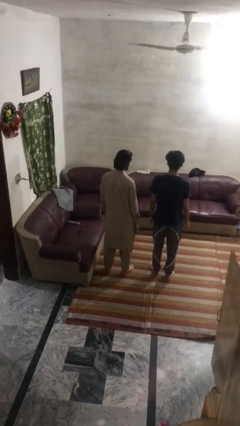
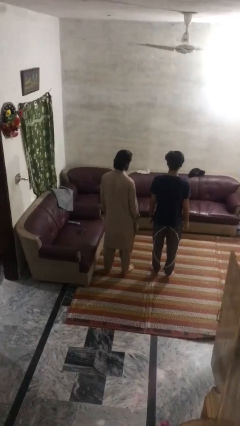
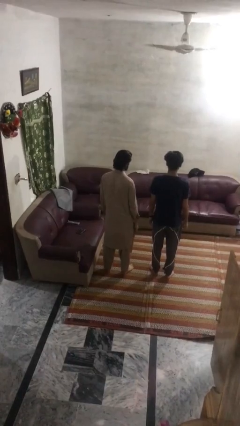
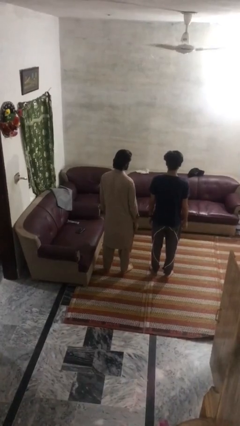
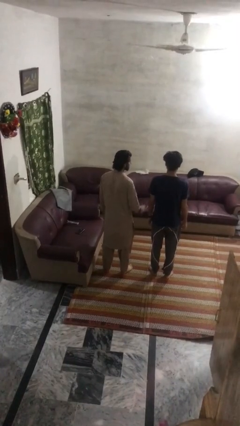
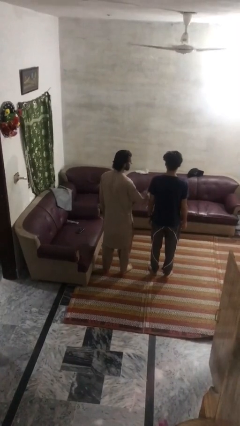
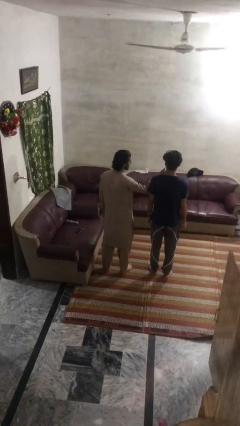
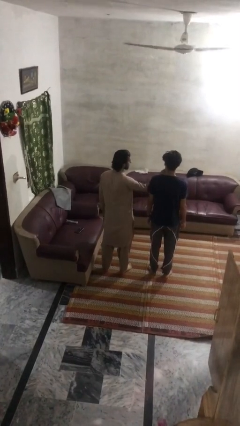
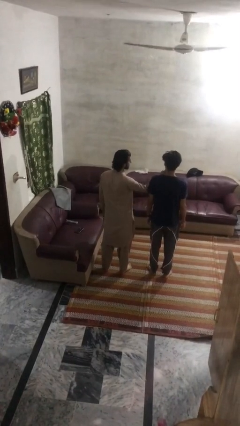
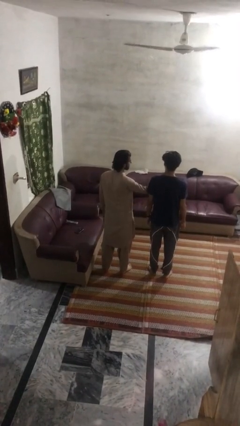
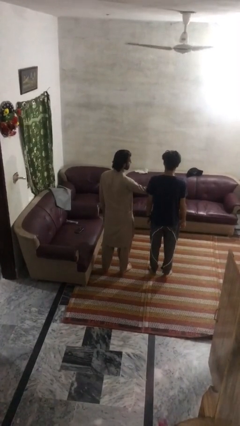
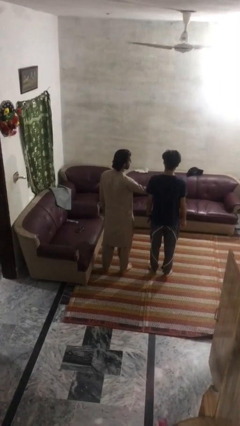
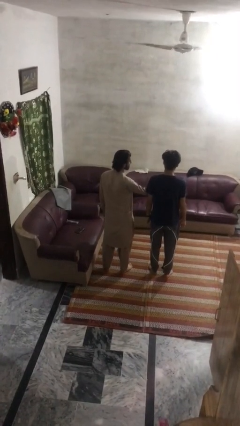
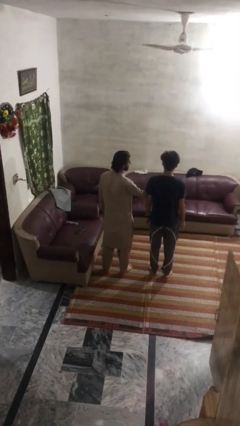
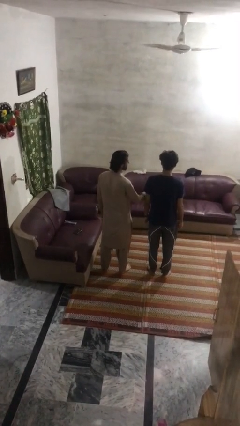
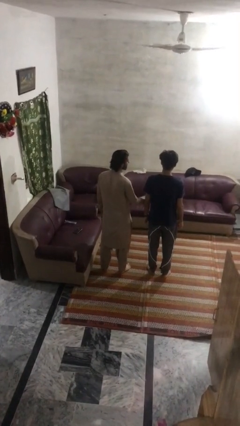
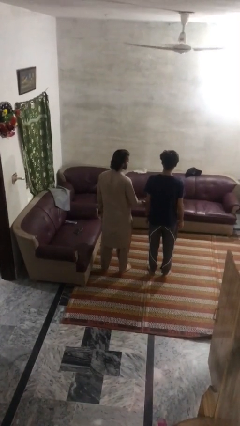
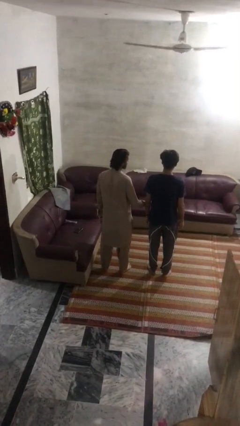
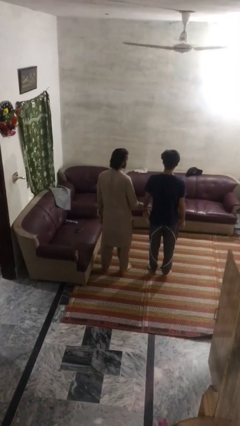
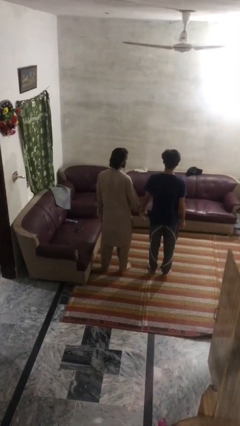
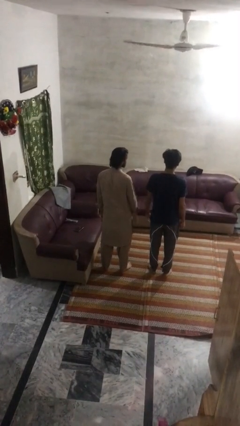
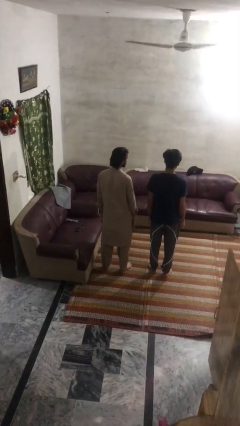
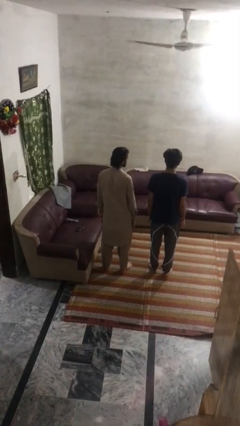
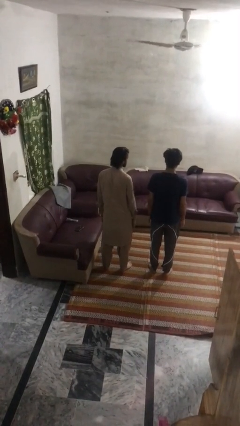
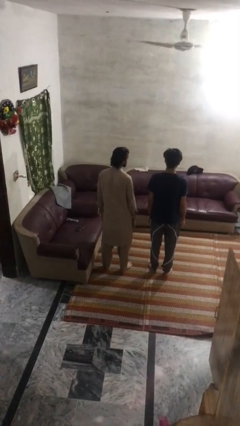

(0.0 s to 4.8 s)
person touches face of person

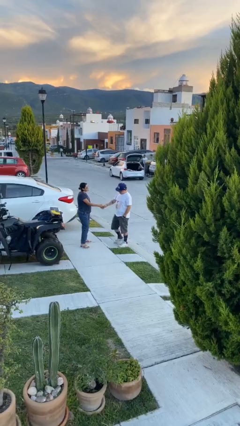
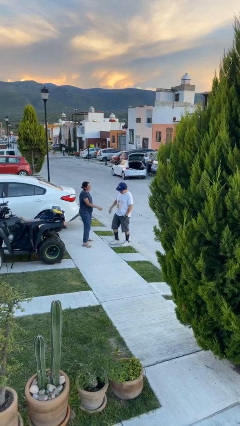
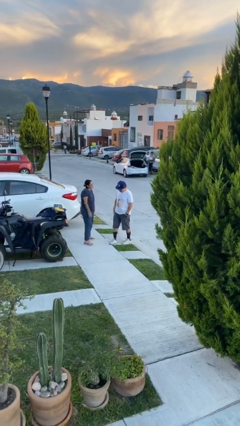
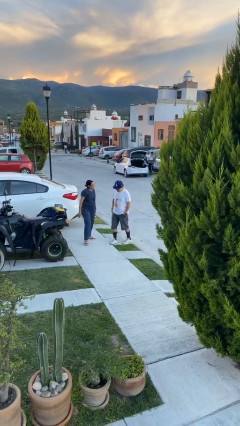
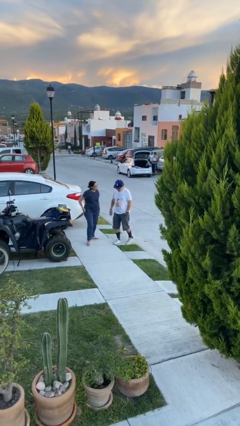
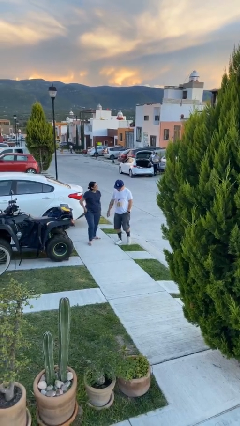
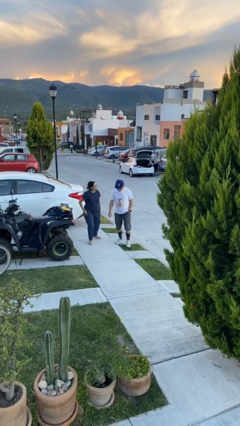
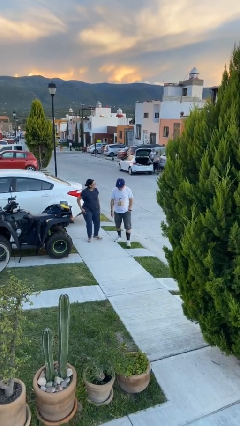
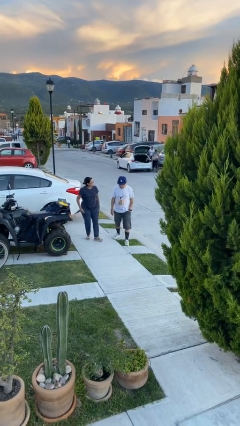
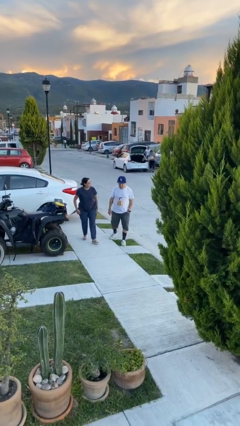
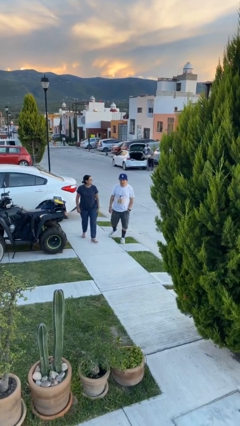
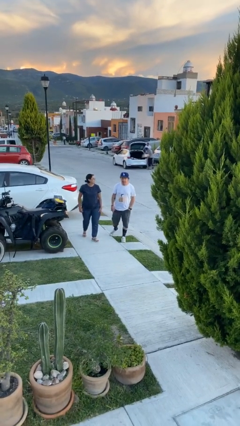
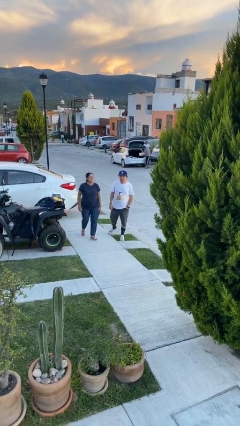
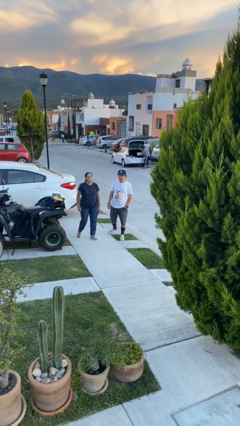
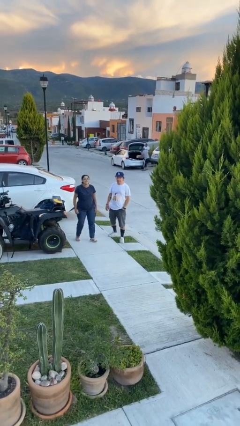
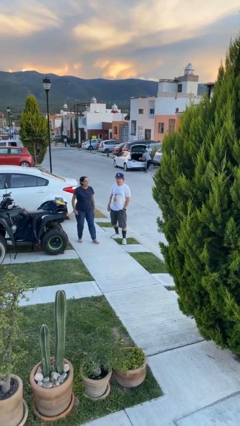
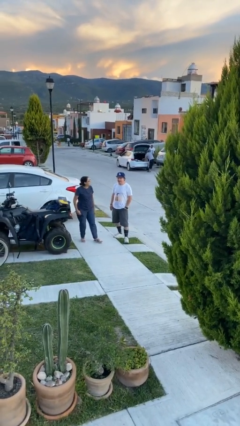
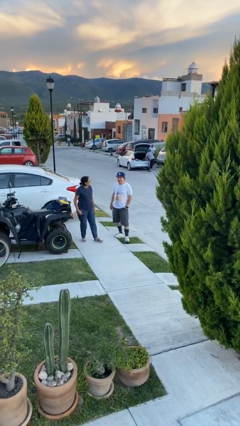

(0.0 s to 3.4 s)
person talks to person

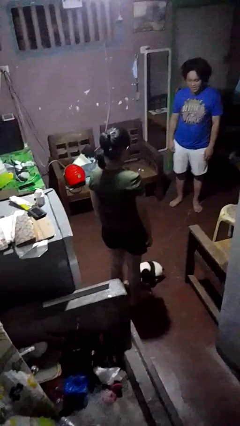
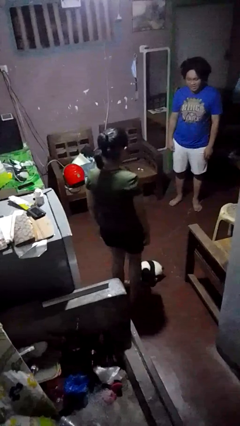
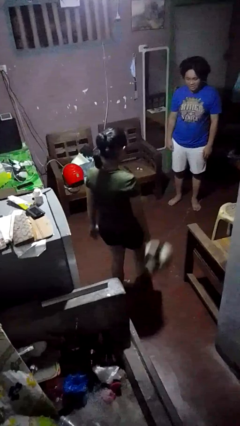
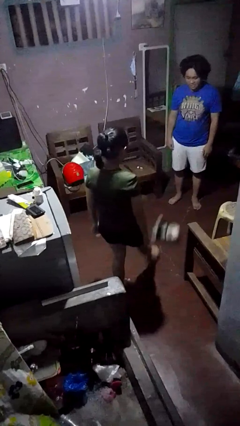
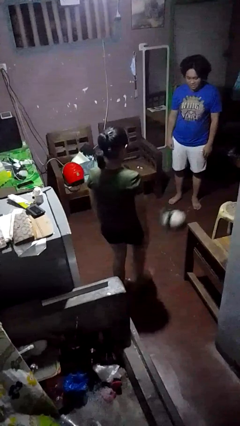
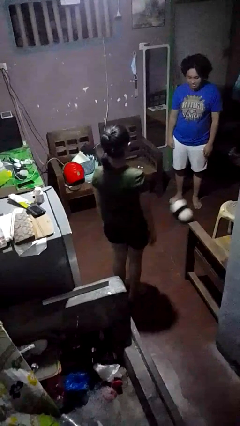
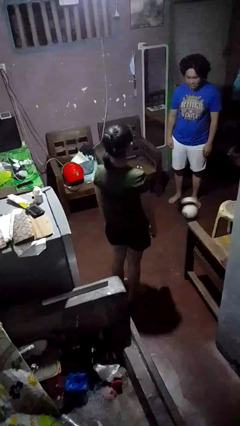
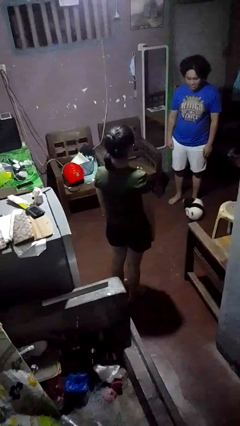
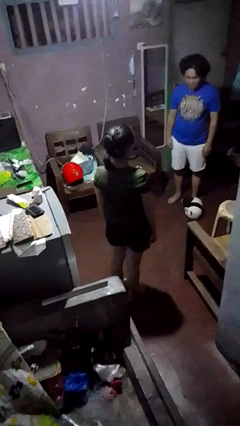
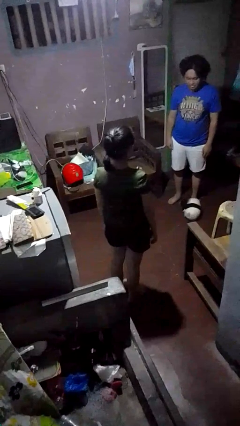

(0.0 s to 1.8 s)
person kicks object to person

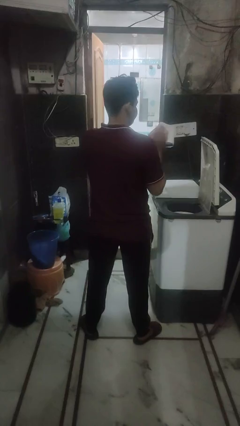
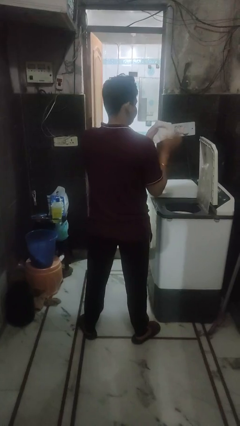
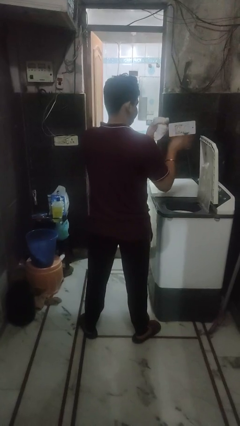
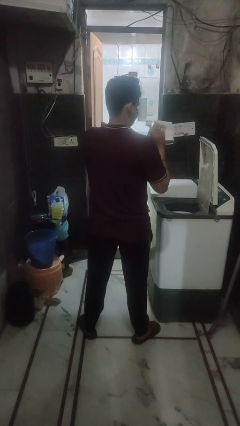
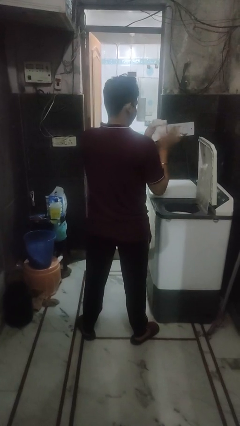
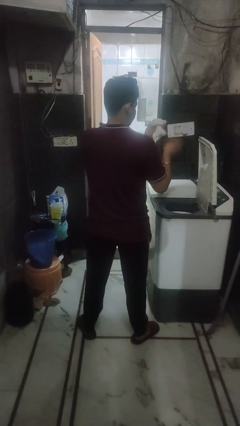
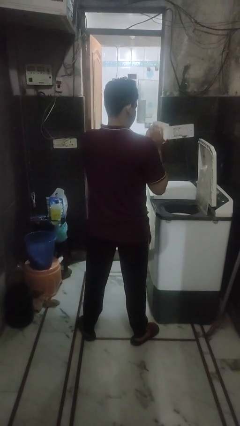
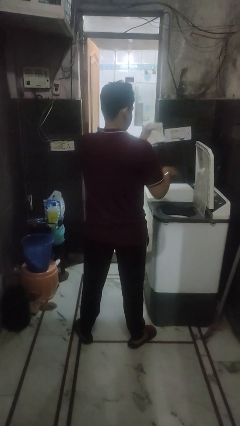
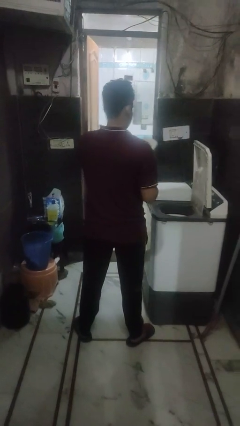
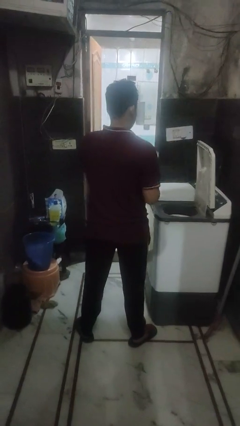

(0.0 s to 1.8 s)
person cleans dryer lint trap

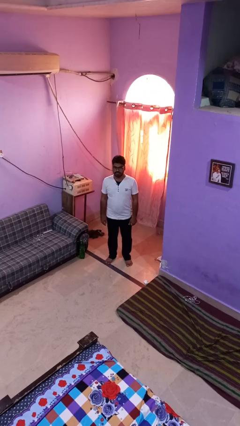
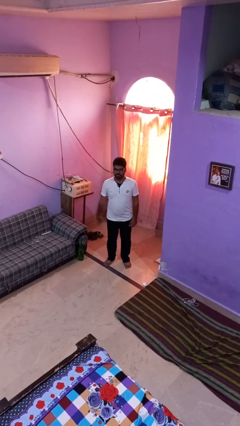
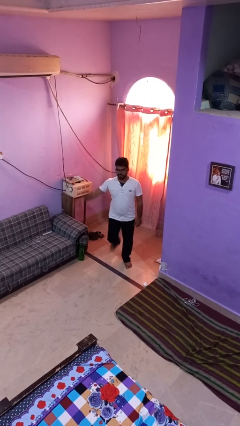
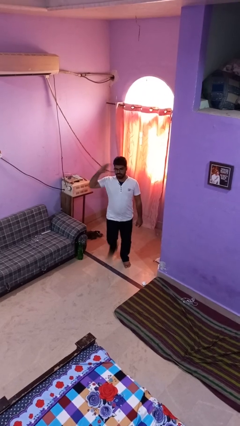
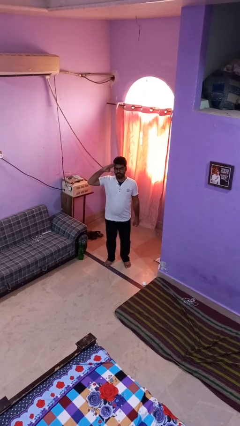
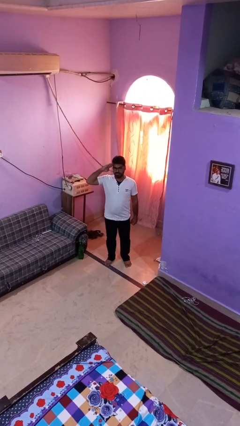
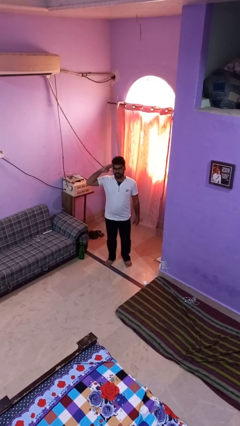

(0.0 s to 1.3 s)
person salutes

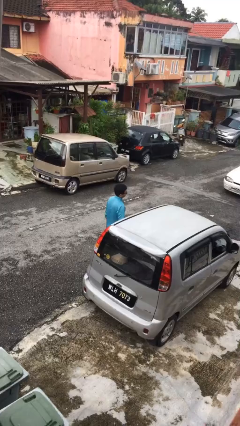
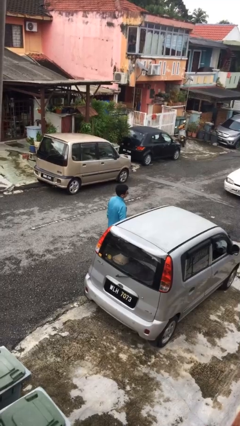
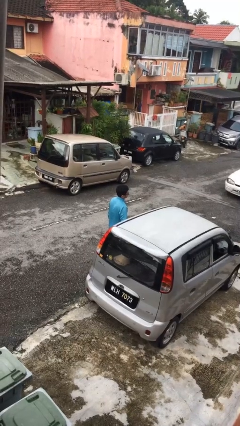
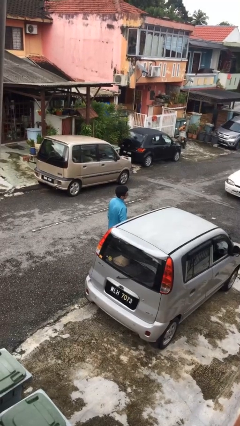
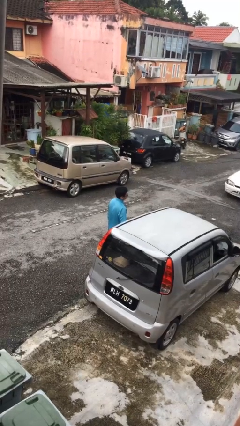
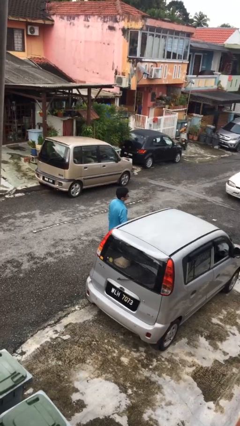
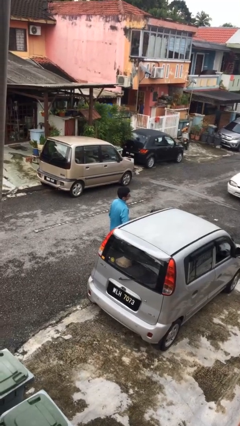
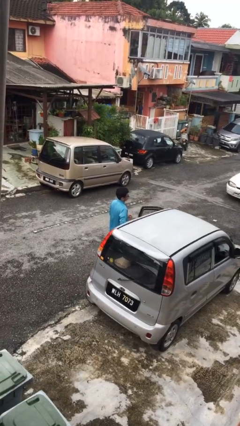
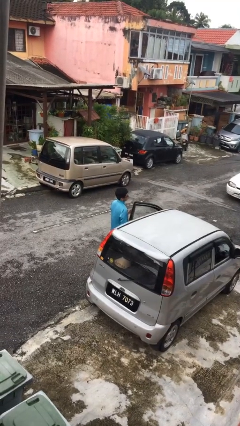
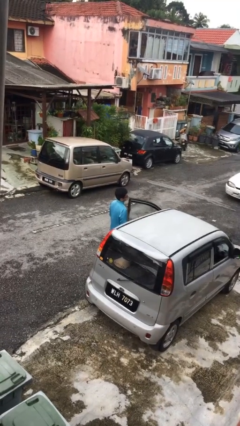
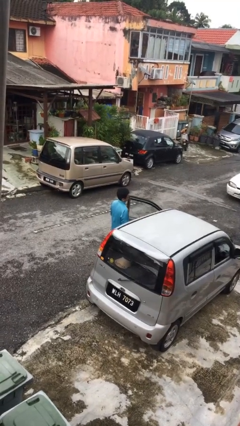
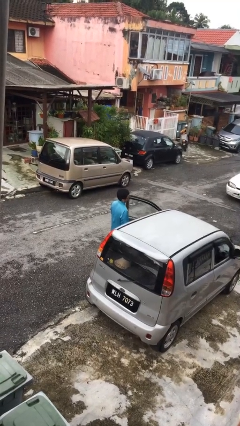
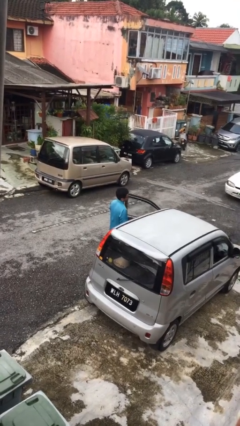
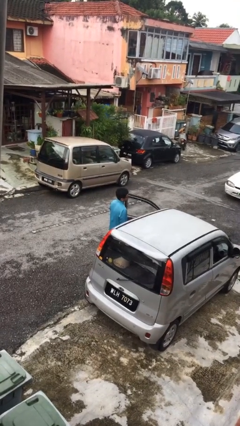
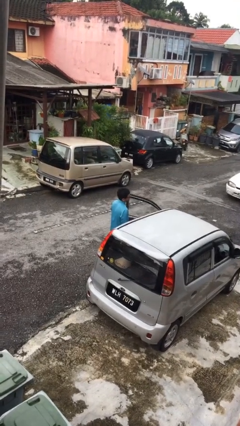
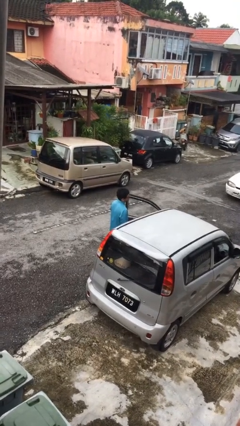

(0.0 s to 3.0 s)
person opens car door

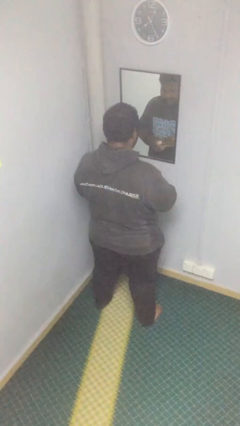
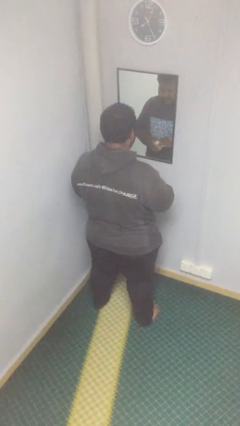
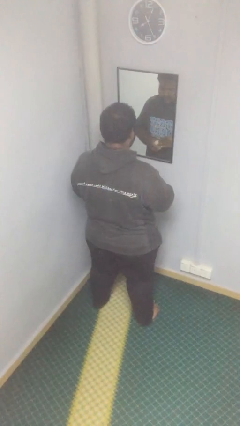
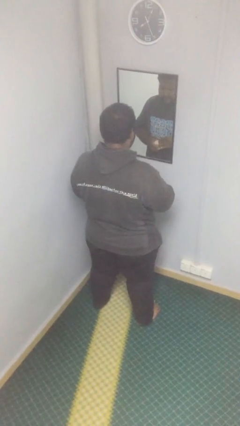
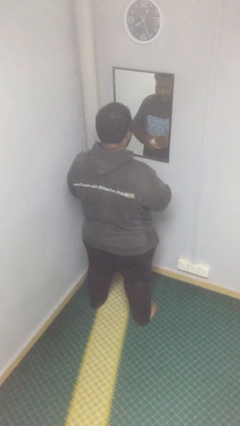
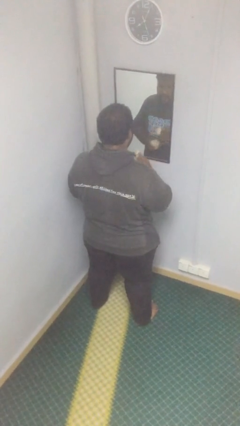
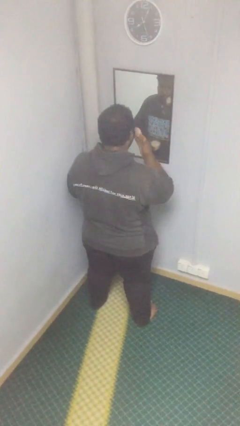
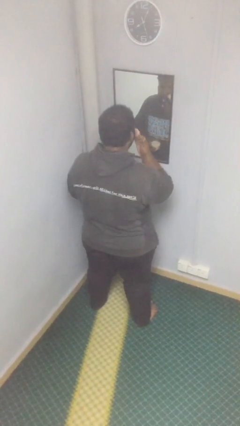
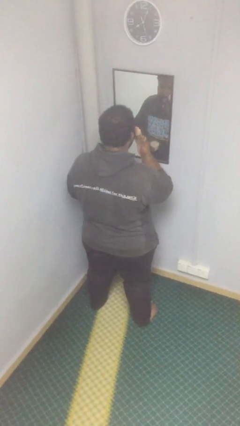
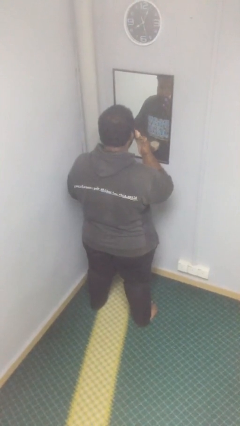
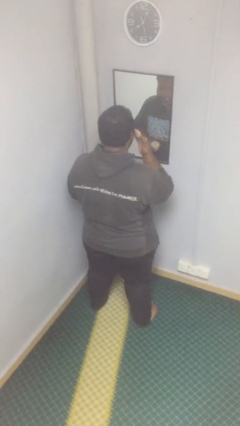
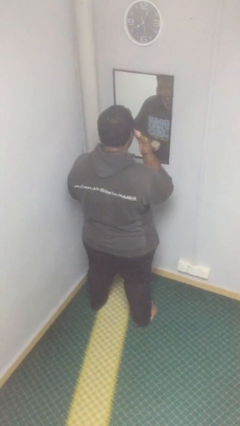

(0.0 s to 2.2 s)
person applies foundation makeup
